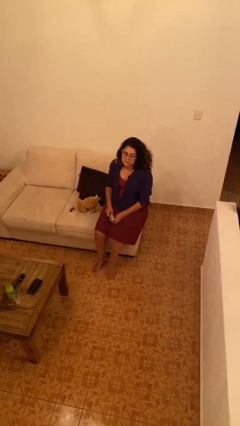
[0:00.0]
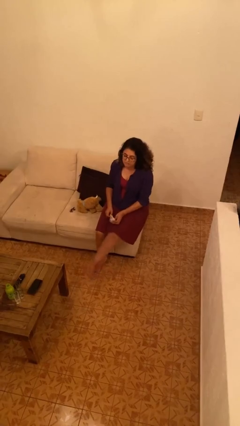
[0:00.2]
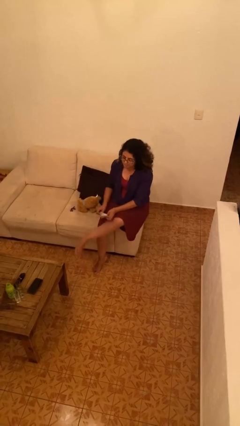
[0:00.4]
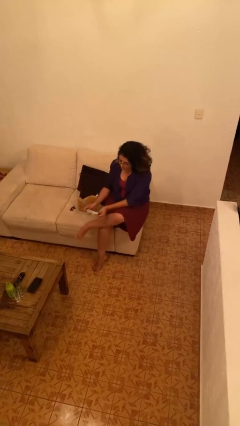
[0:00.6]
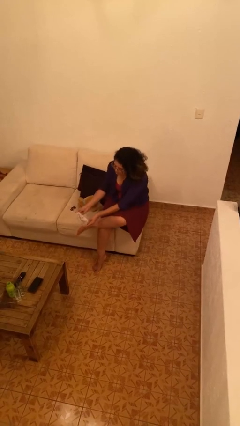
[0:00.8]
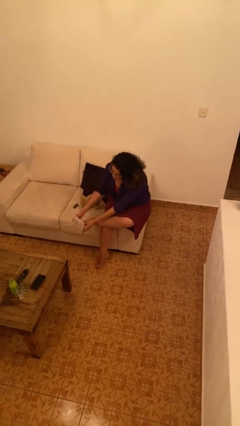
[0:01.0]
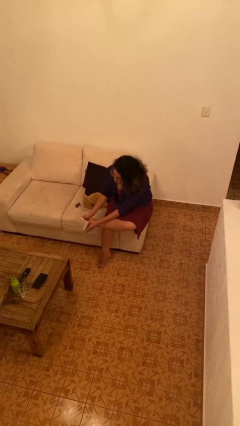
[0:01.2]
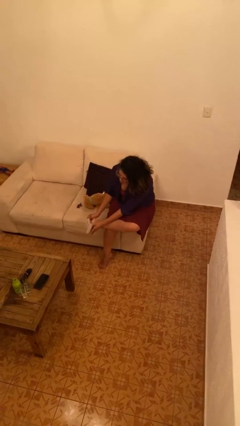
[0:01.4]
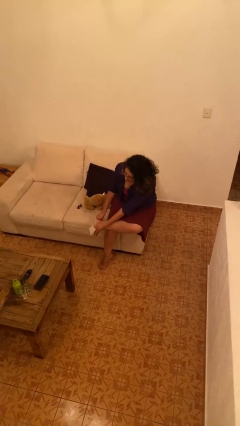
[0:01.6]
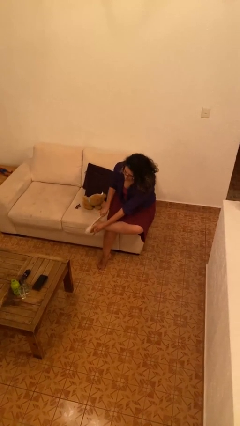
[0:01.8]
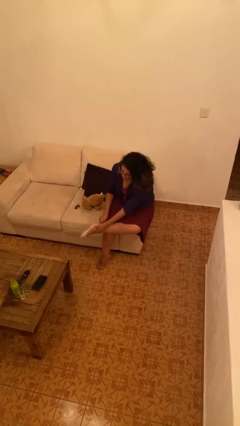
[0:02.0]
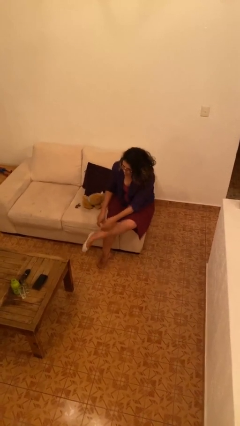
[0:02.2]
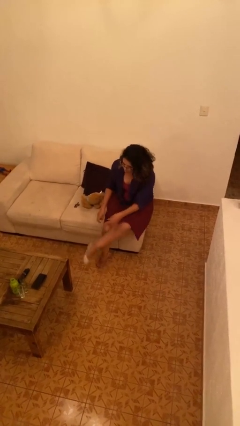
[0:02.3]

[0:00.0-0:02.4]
person puts on socks

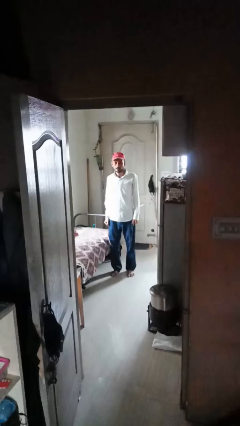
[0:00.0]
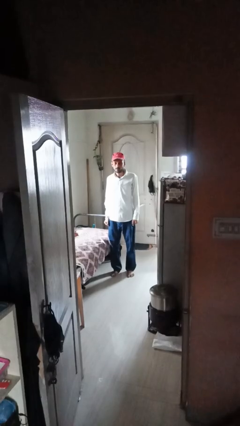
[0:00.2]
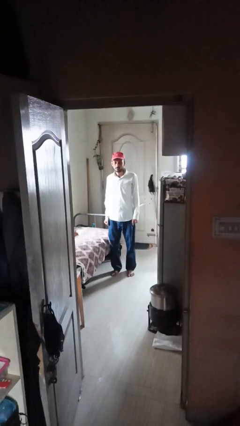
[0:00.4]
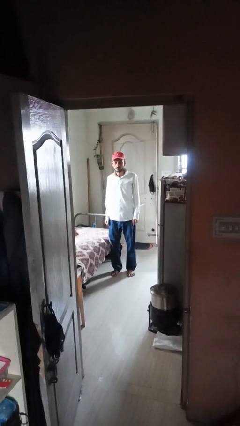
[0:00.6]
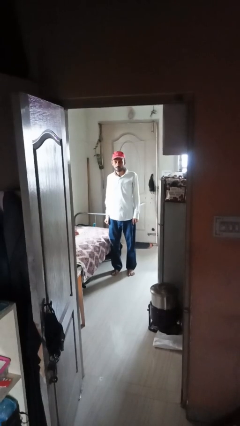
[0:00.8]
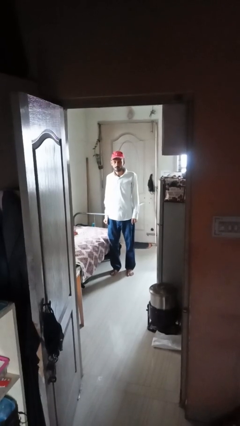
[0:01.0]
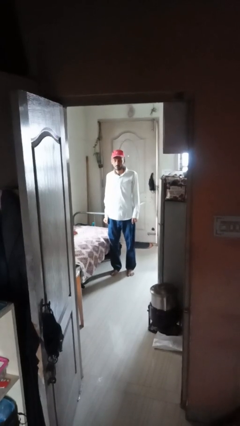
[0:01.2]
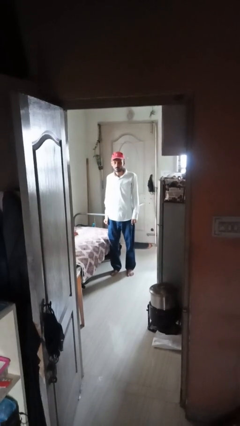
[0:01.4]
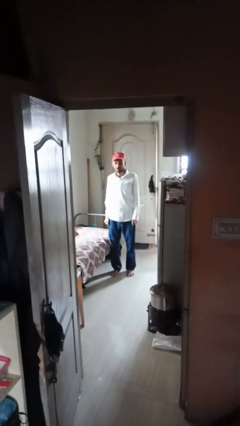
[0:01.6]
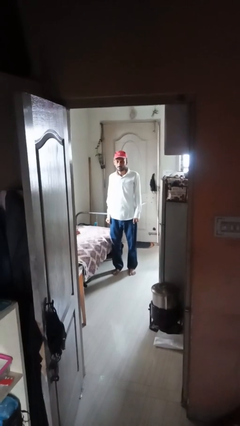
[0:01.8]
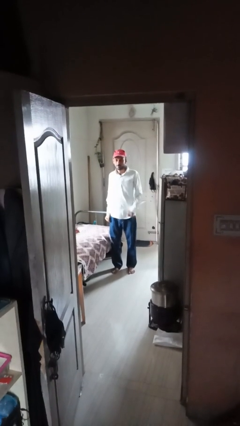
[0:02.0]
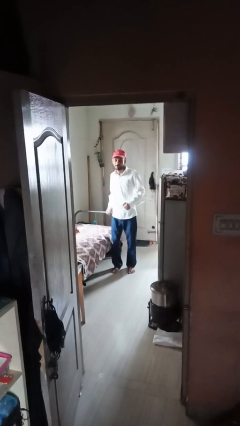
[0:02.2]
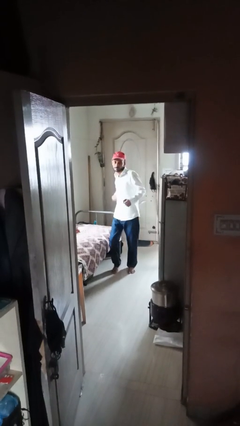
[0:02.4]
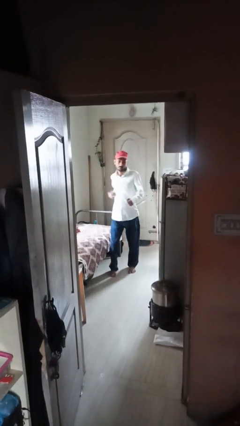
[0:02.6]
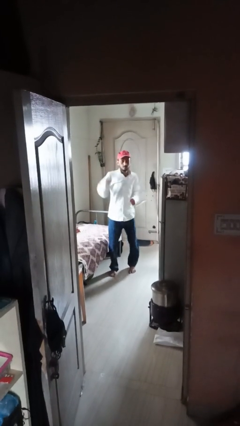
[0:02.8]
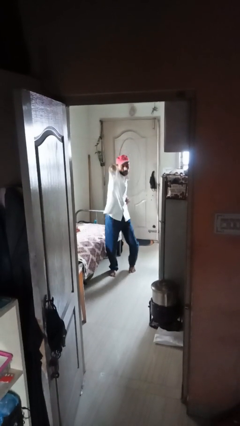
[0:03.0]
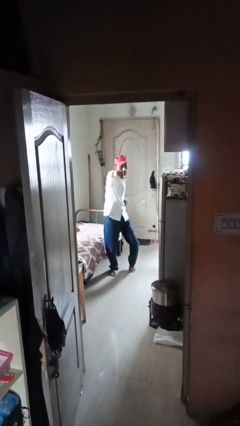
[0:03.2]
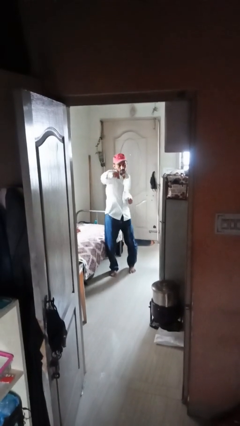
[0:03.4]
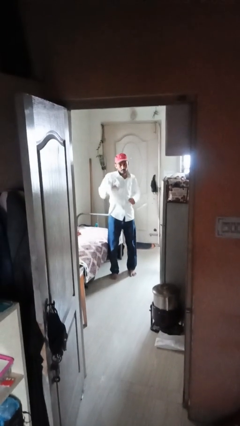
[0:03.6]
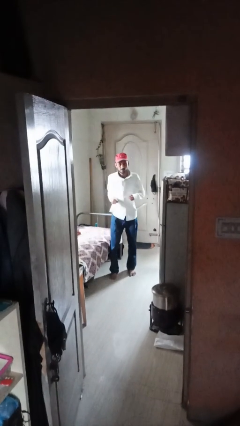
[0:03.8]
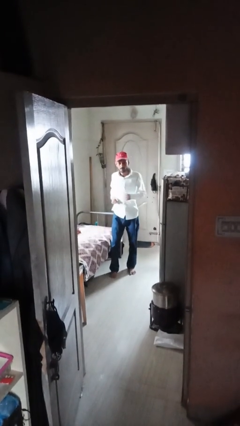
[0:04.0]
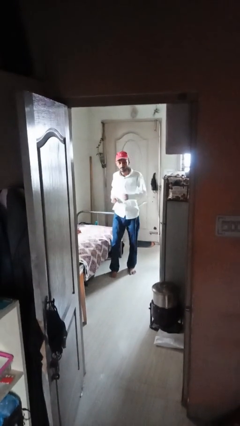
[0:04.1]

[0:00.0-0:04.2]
person punches

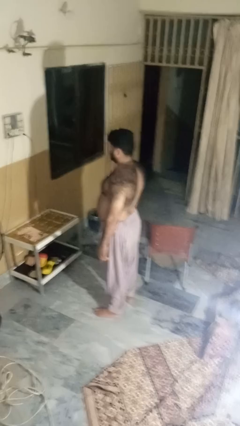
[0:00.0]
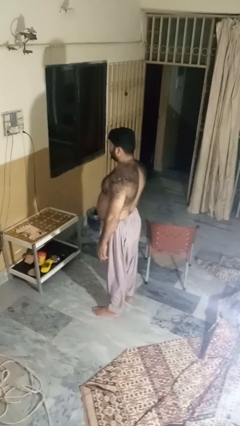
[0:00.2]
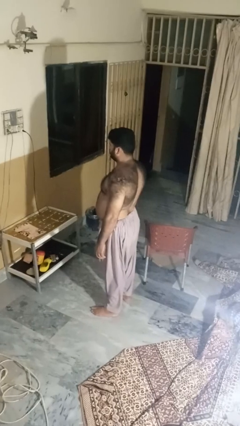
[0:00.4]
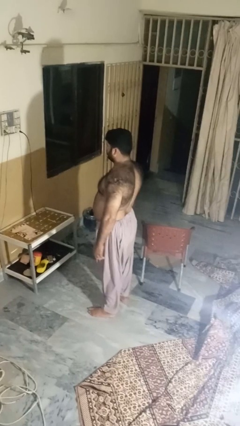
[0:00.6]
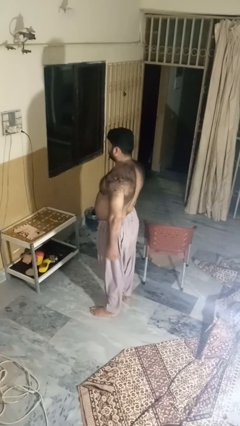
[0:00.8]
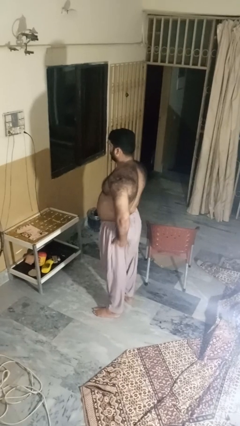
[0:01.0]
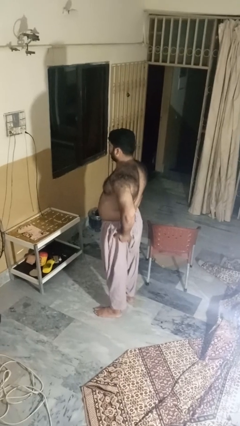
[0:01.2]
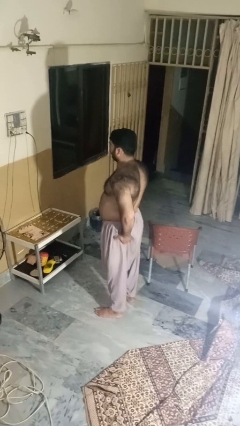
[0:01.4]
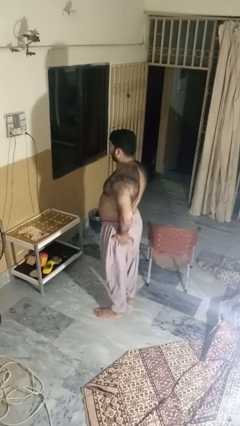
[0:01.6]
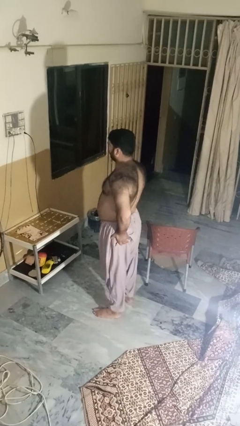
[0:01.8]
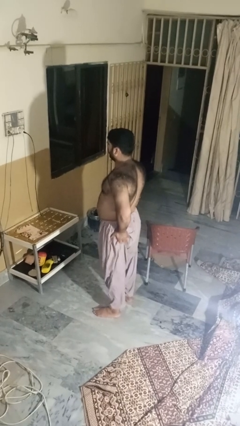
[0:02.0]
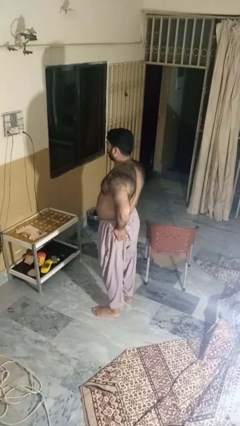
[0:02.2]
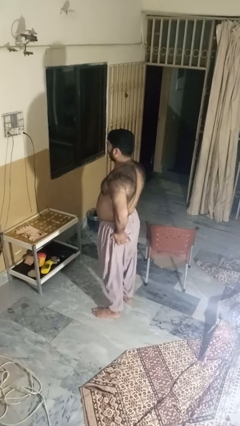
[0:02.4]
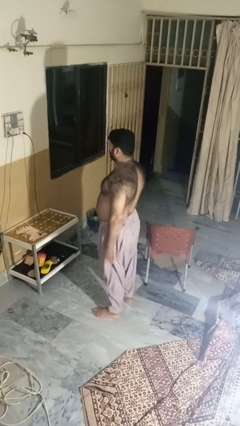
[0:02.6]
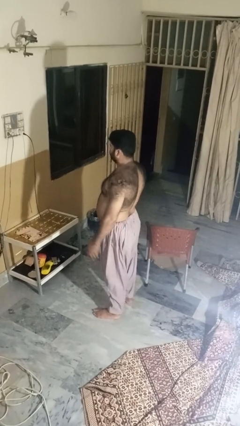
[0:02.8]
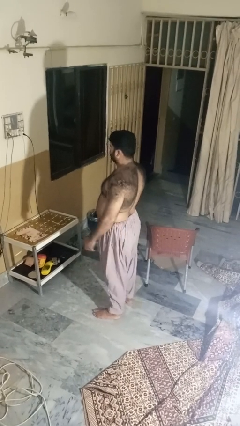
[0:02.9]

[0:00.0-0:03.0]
person wiggles hips

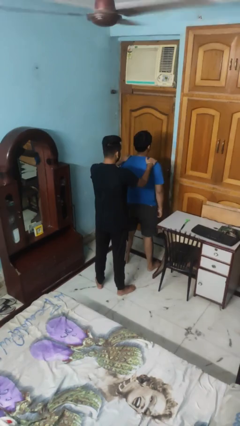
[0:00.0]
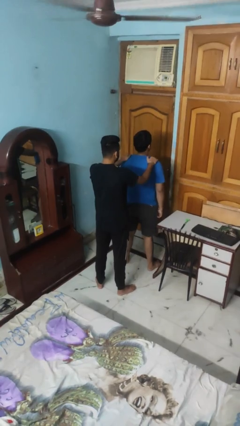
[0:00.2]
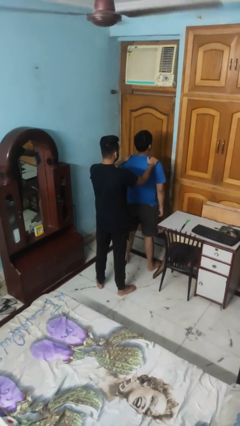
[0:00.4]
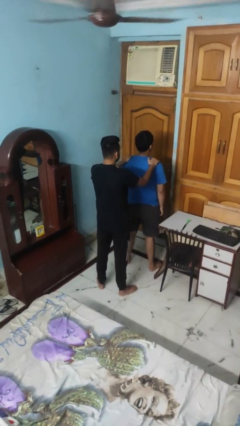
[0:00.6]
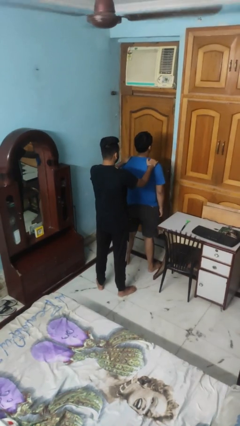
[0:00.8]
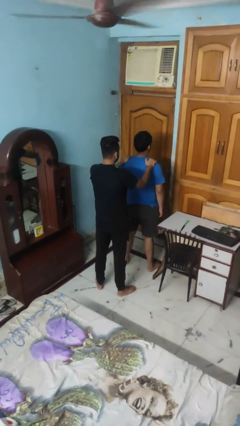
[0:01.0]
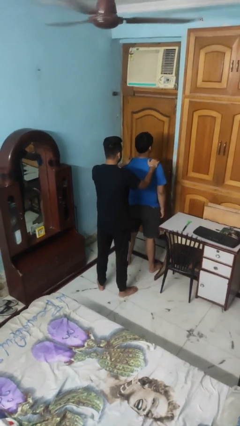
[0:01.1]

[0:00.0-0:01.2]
person grabs person by shoulder

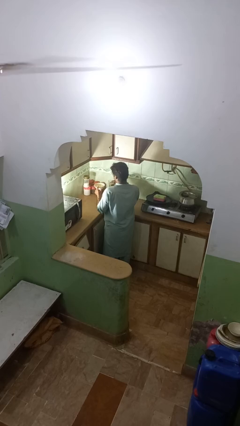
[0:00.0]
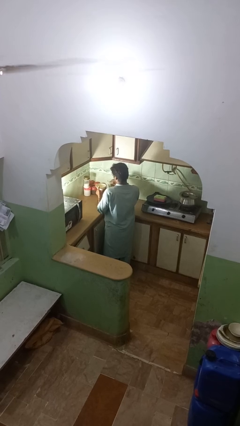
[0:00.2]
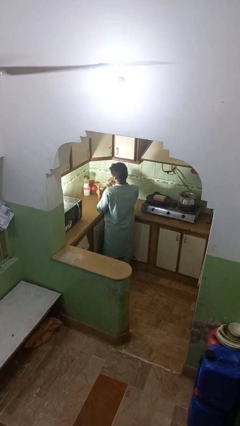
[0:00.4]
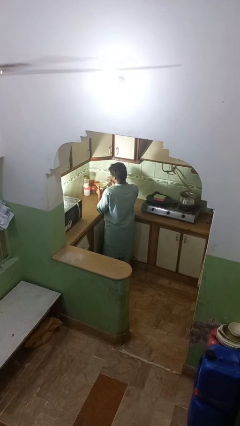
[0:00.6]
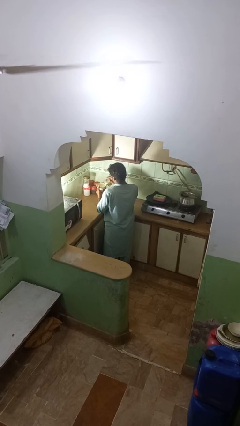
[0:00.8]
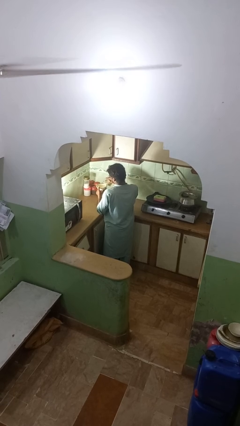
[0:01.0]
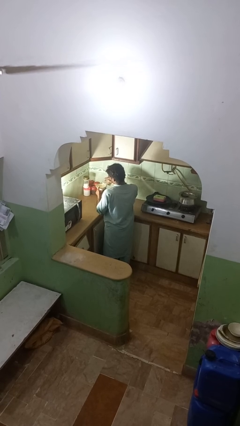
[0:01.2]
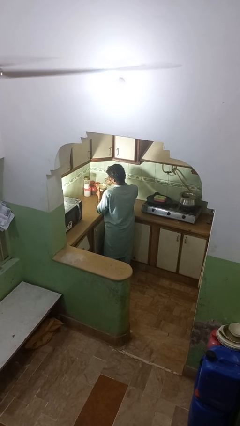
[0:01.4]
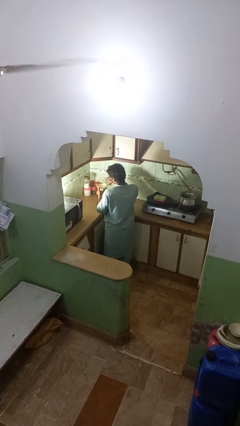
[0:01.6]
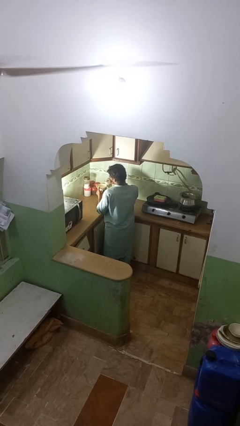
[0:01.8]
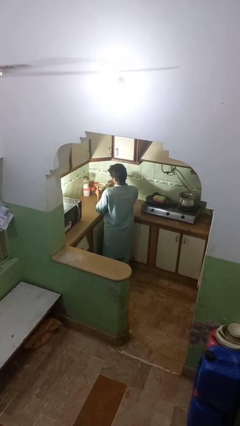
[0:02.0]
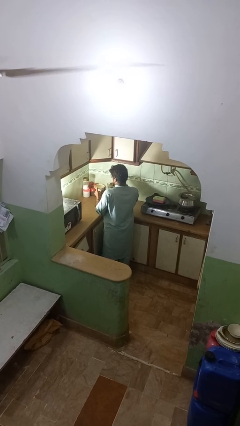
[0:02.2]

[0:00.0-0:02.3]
person pours into bowl

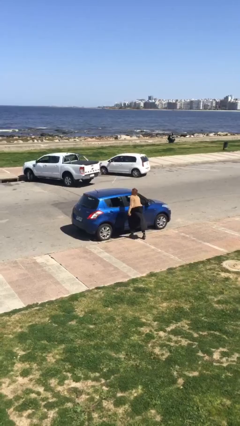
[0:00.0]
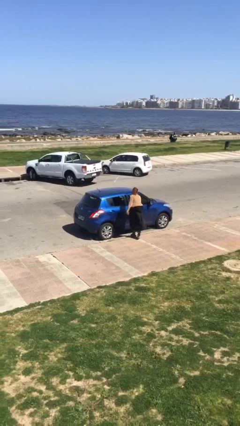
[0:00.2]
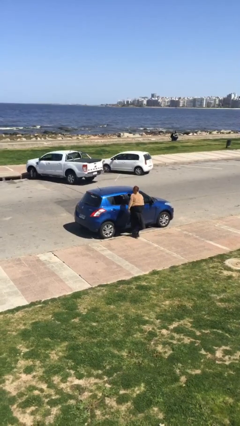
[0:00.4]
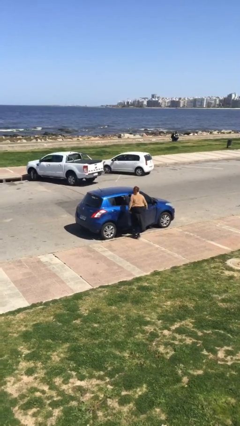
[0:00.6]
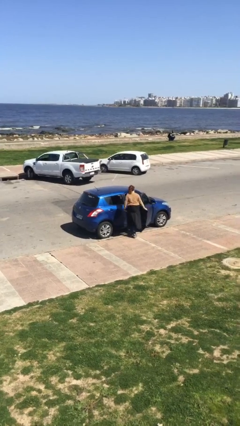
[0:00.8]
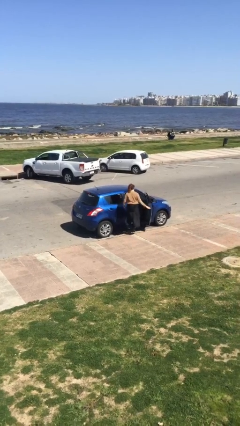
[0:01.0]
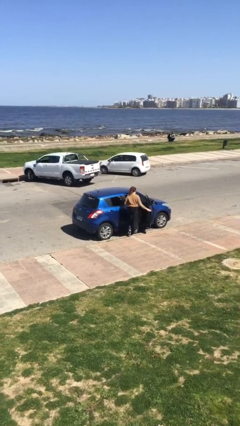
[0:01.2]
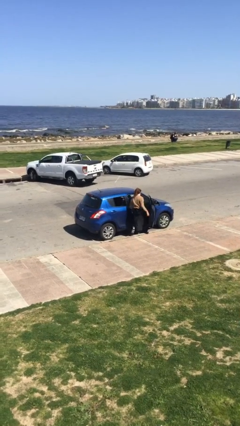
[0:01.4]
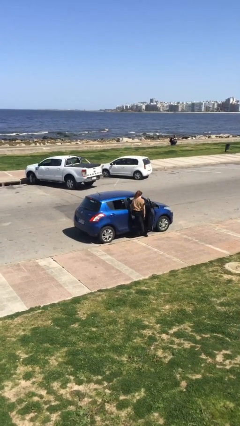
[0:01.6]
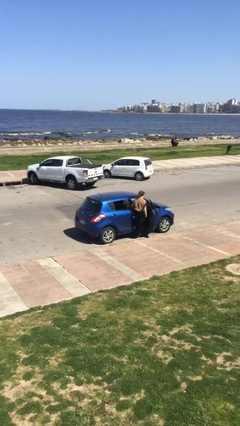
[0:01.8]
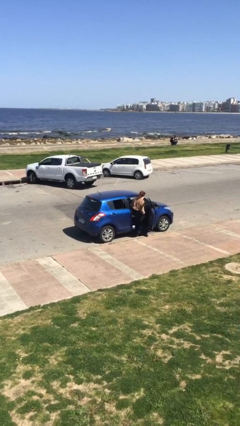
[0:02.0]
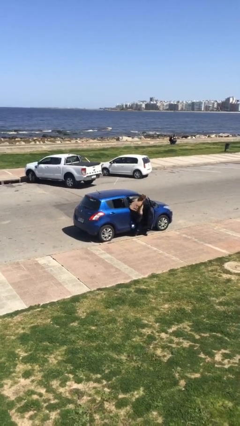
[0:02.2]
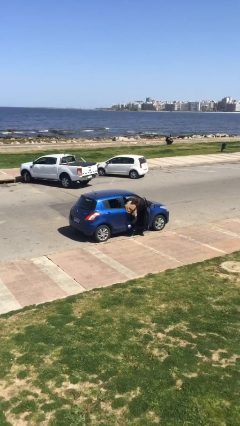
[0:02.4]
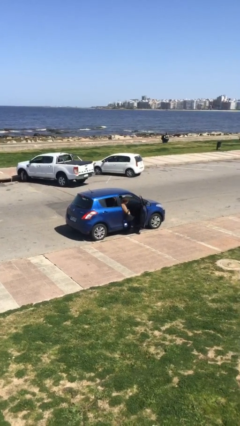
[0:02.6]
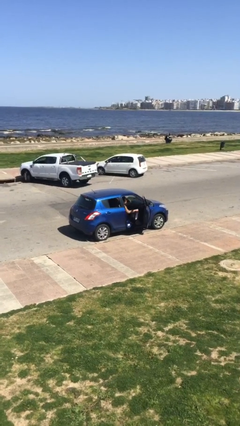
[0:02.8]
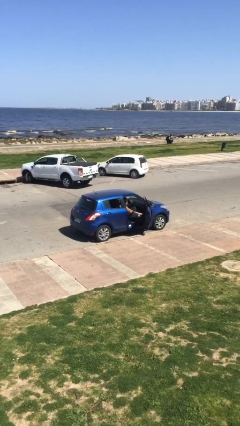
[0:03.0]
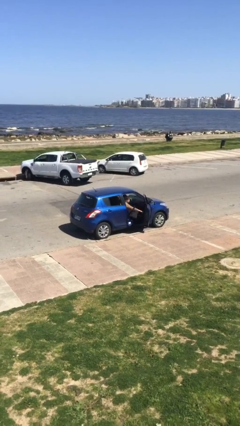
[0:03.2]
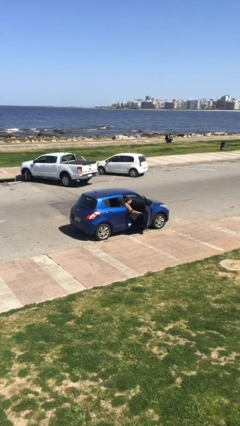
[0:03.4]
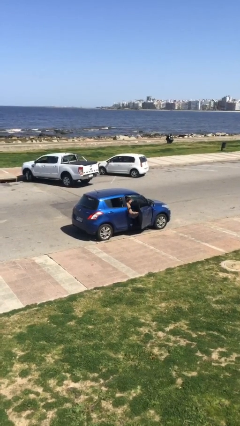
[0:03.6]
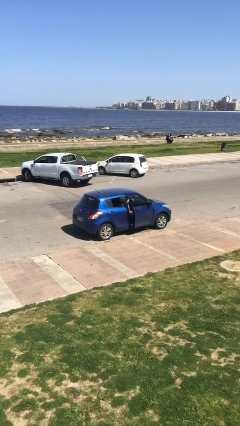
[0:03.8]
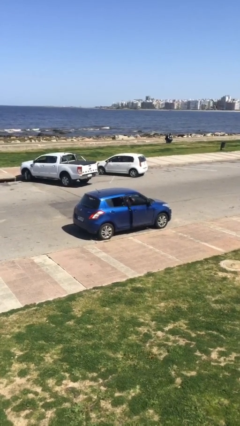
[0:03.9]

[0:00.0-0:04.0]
car picks up person

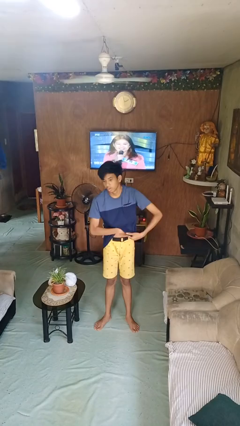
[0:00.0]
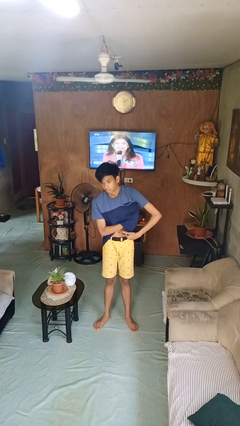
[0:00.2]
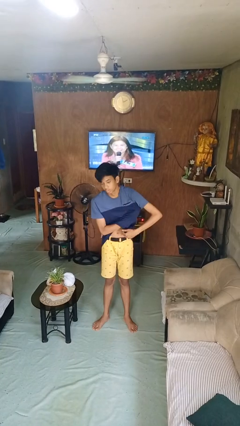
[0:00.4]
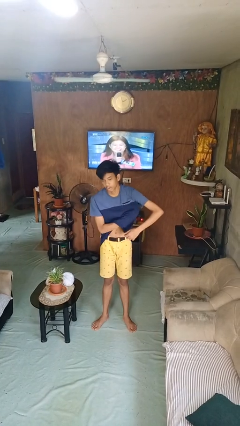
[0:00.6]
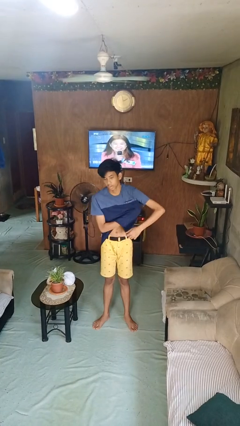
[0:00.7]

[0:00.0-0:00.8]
person applies deodorant
